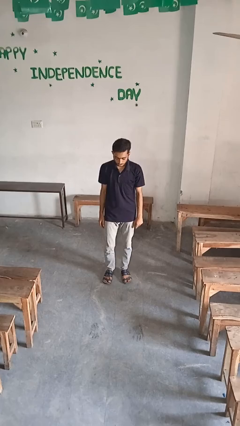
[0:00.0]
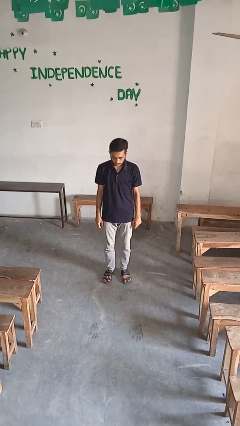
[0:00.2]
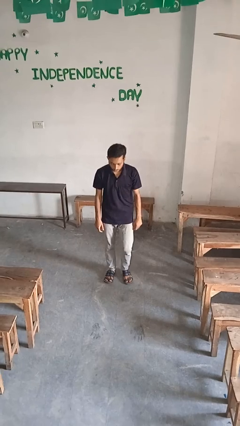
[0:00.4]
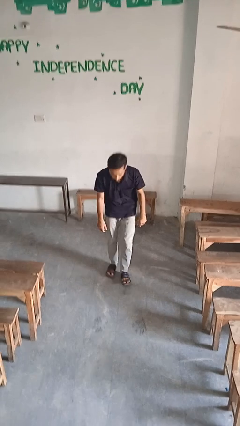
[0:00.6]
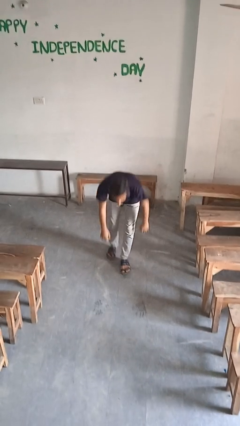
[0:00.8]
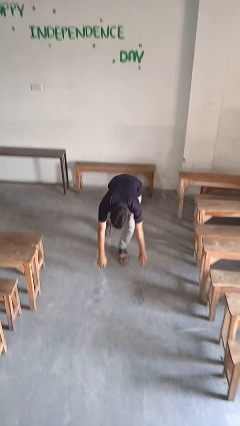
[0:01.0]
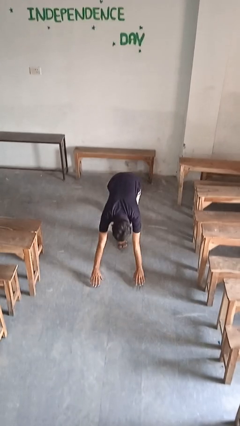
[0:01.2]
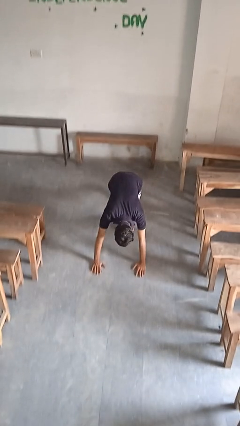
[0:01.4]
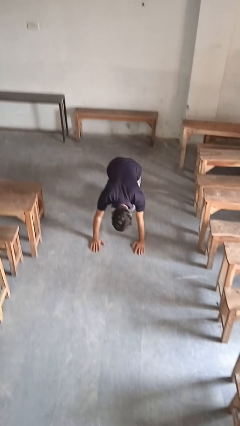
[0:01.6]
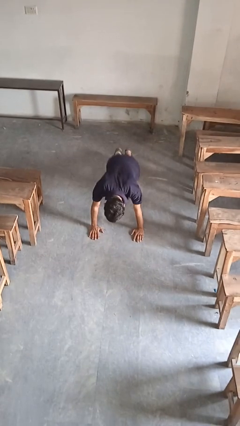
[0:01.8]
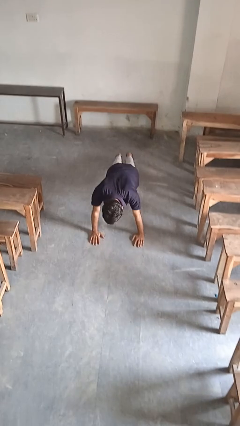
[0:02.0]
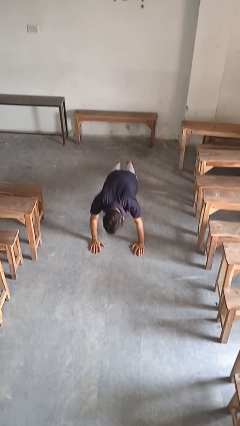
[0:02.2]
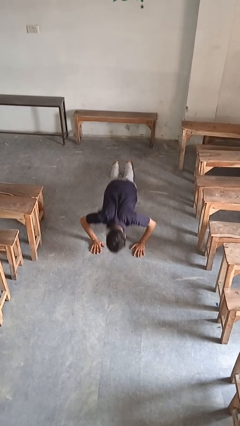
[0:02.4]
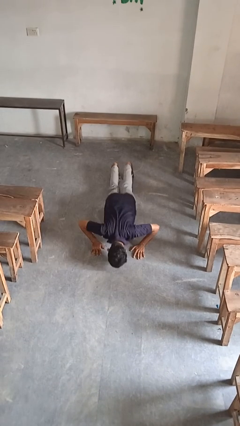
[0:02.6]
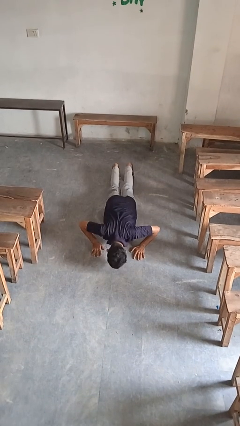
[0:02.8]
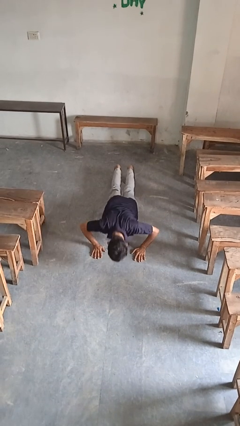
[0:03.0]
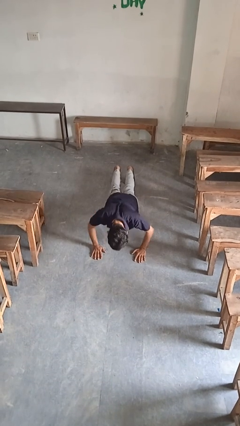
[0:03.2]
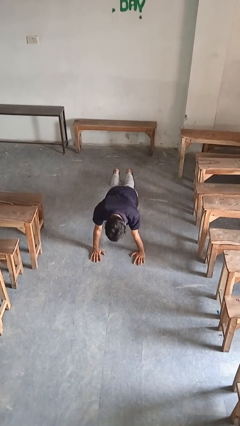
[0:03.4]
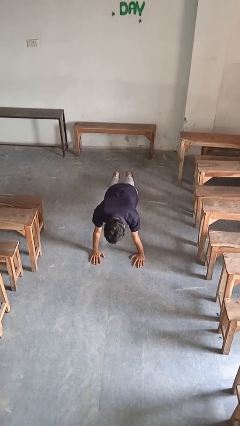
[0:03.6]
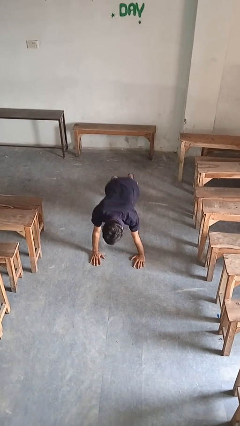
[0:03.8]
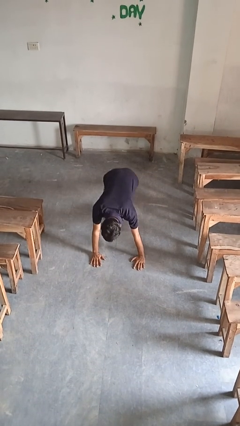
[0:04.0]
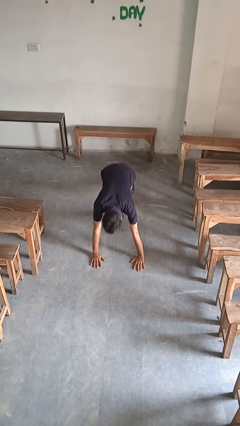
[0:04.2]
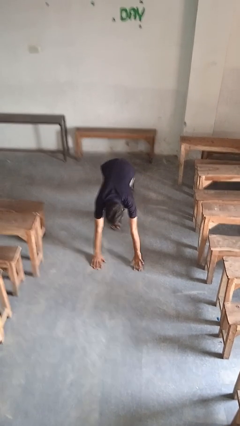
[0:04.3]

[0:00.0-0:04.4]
person exercises with pushup

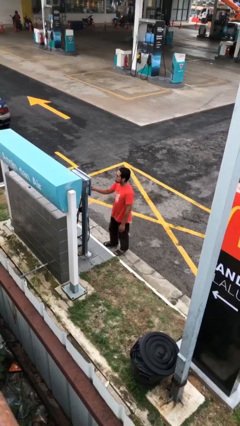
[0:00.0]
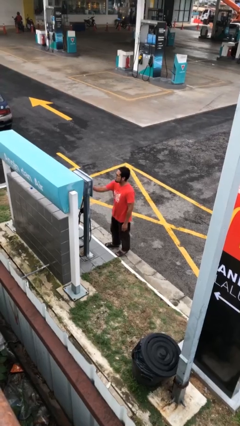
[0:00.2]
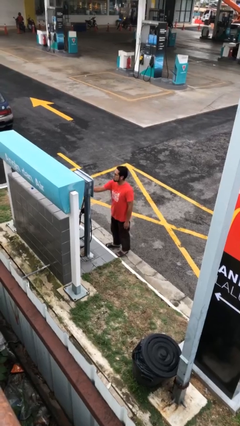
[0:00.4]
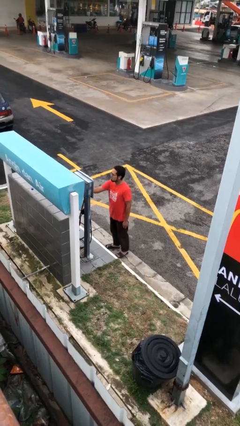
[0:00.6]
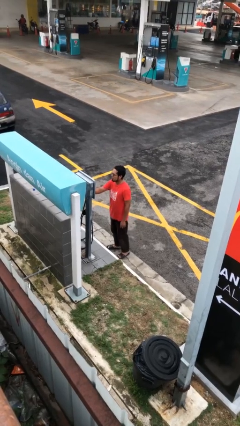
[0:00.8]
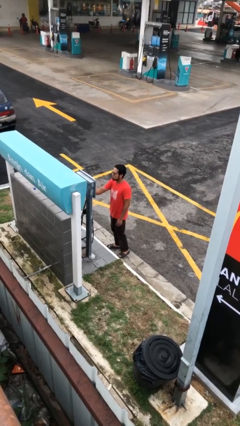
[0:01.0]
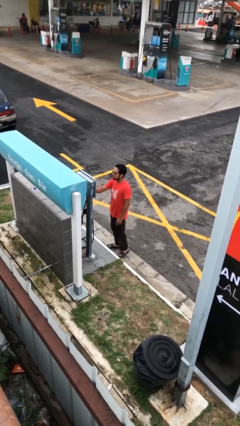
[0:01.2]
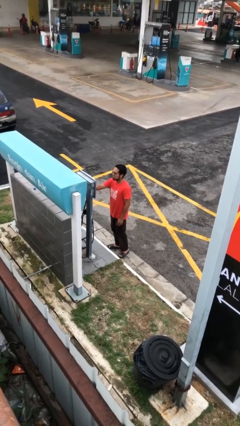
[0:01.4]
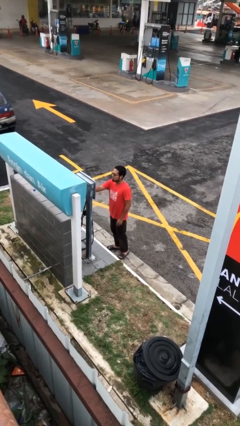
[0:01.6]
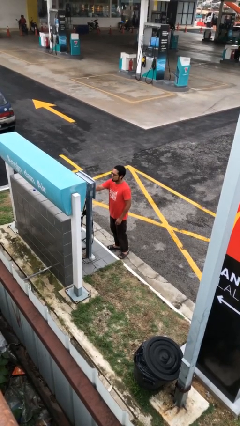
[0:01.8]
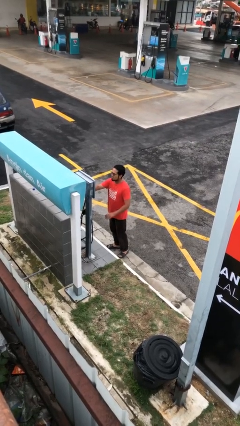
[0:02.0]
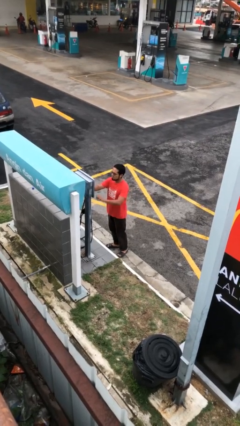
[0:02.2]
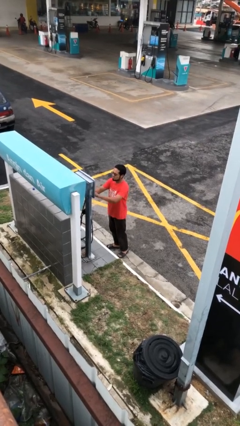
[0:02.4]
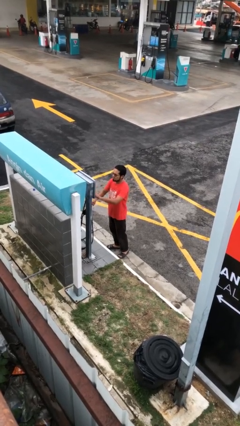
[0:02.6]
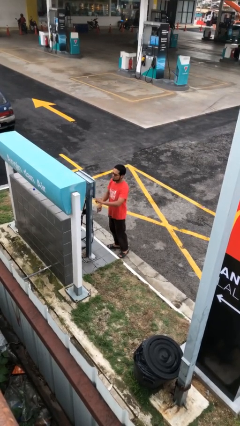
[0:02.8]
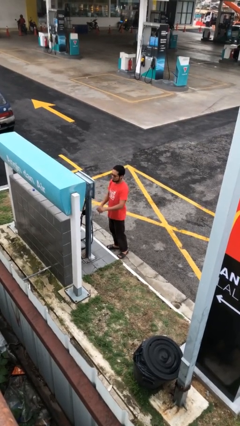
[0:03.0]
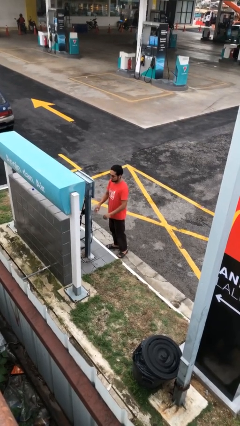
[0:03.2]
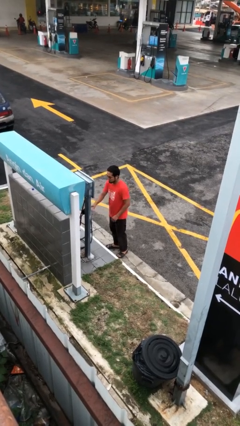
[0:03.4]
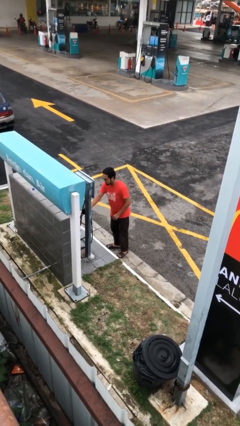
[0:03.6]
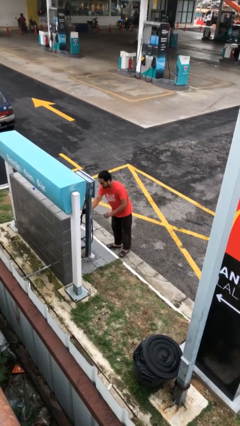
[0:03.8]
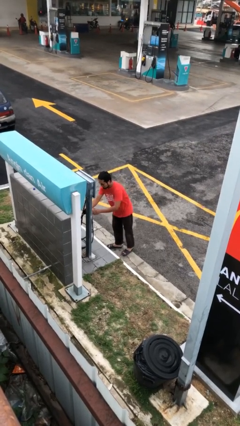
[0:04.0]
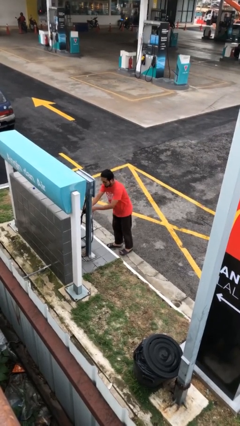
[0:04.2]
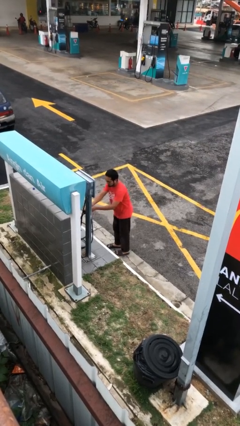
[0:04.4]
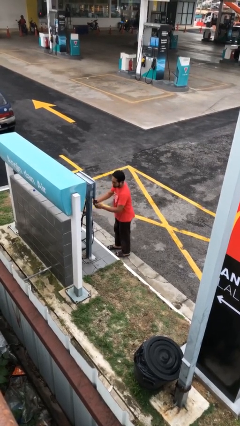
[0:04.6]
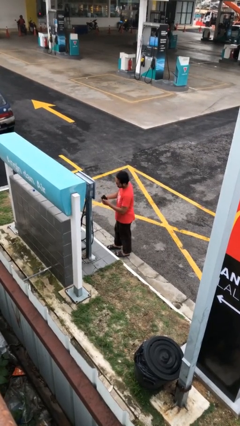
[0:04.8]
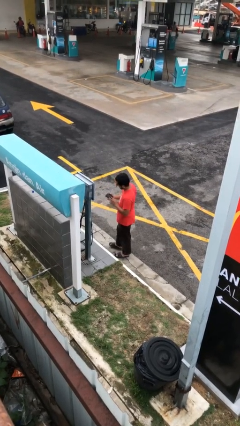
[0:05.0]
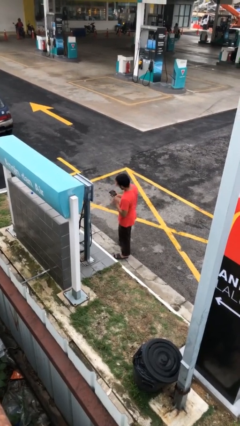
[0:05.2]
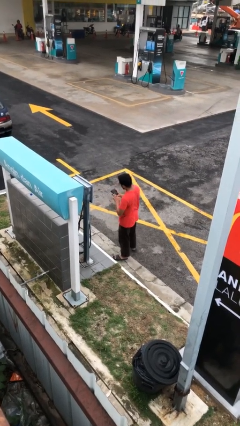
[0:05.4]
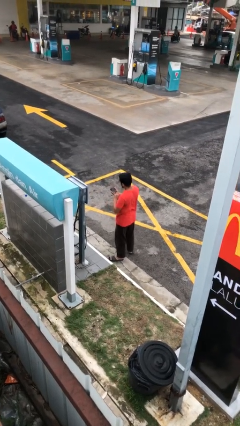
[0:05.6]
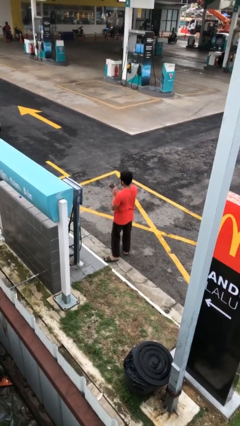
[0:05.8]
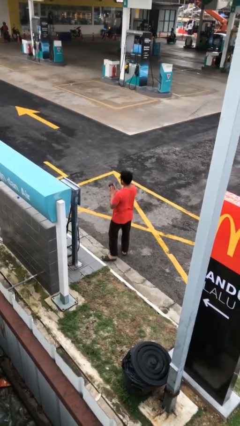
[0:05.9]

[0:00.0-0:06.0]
person purchases from machine

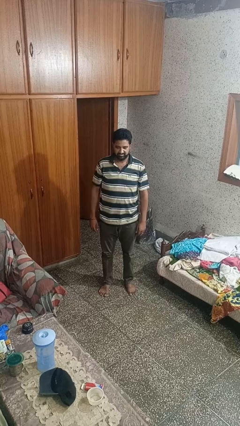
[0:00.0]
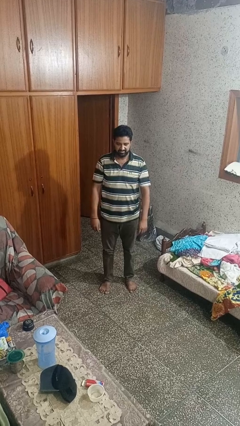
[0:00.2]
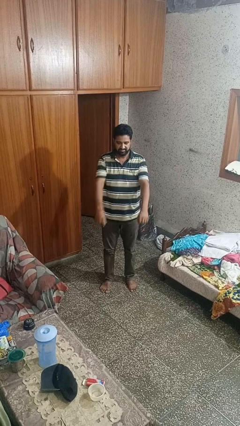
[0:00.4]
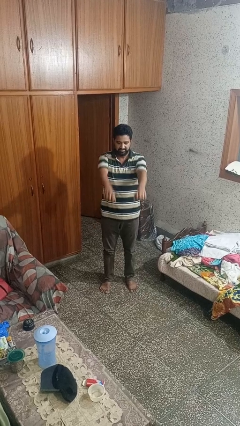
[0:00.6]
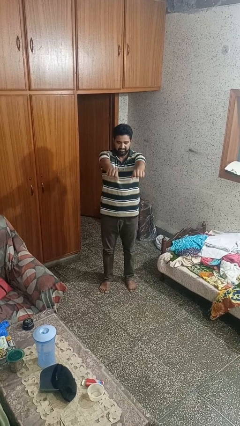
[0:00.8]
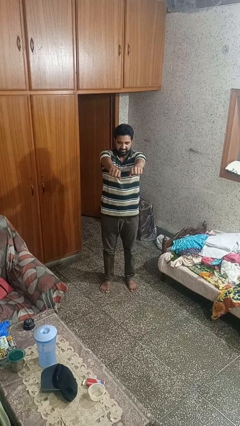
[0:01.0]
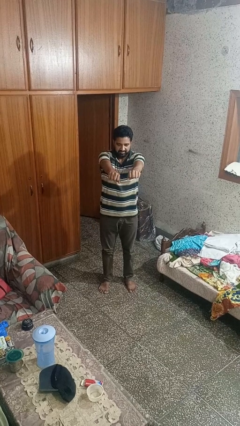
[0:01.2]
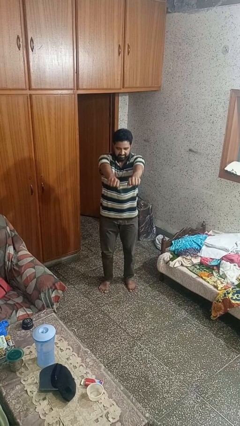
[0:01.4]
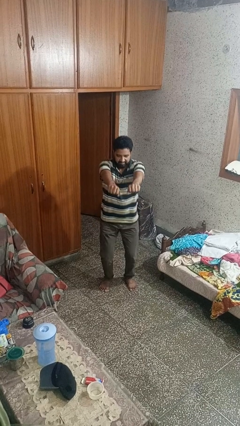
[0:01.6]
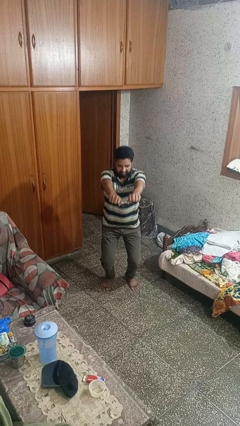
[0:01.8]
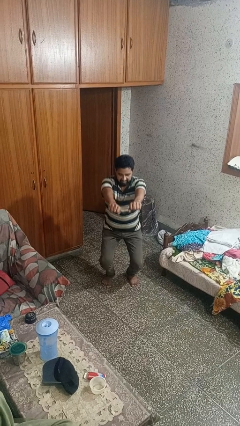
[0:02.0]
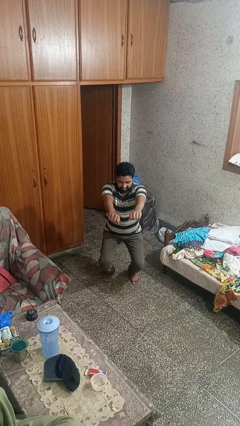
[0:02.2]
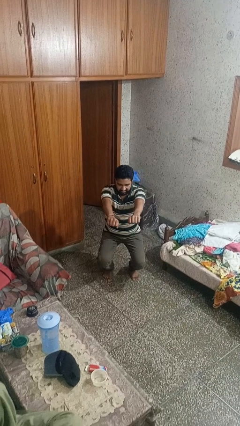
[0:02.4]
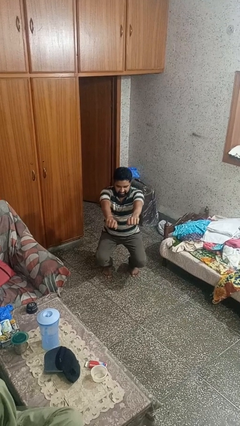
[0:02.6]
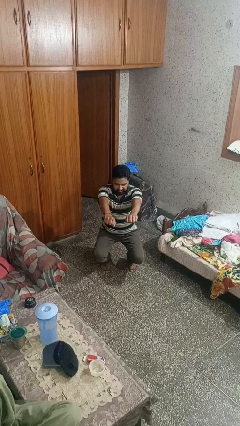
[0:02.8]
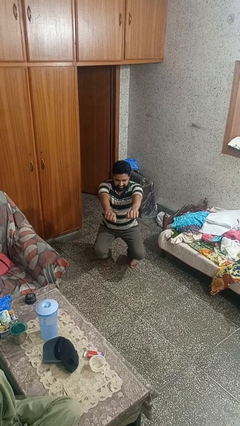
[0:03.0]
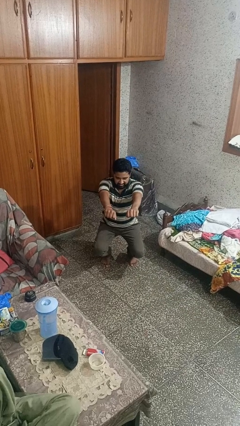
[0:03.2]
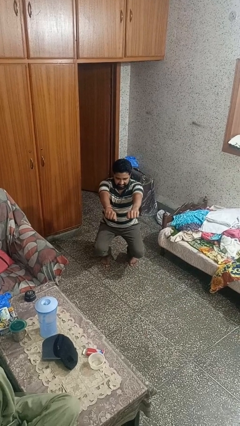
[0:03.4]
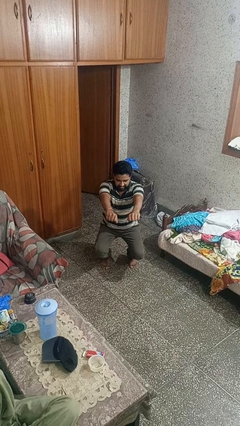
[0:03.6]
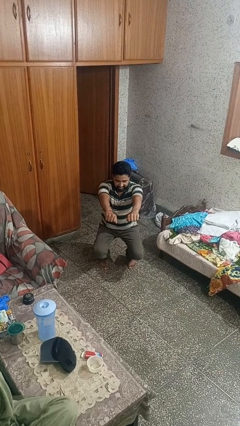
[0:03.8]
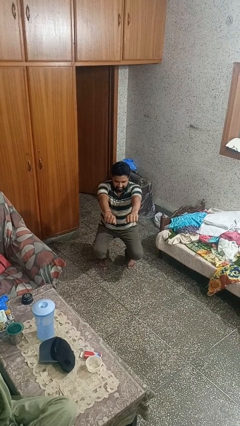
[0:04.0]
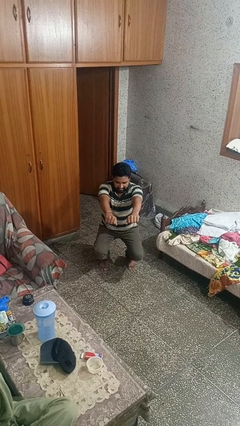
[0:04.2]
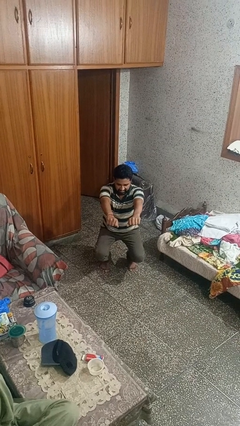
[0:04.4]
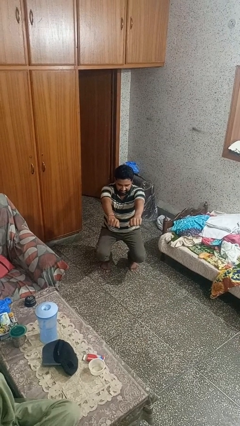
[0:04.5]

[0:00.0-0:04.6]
person squats

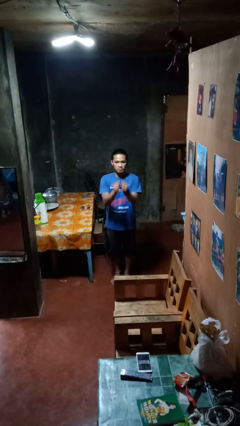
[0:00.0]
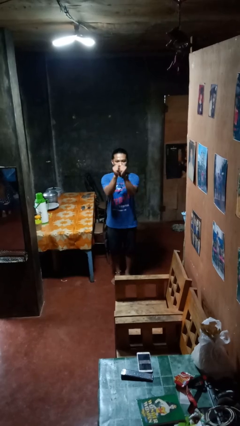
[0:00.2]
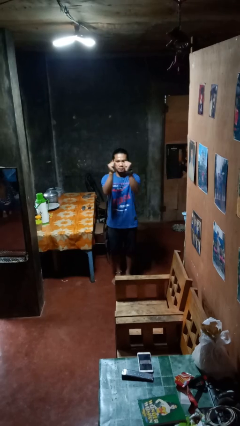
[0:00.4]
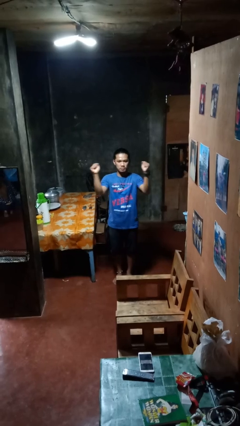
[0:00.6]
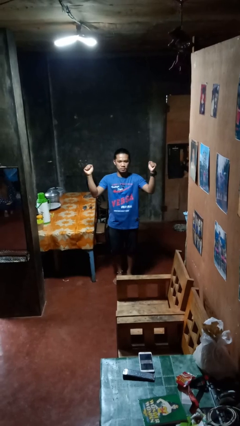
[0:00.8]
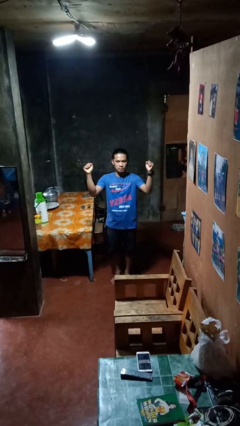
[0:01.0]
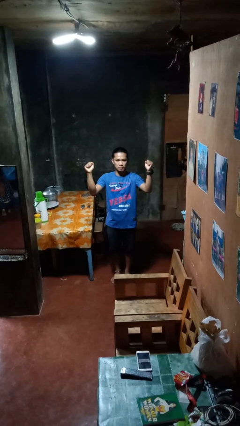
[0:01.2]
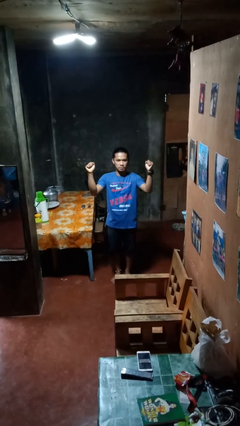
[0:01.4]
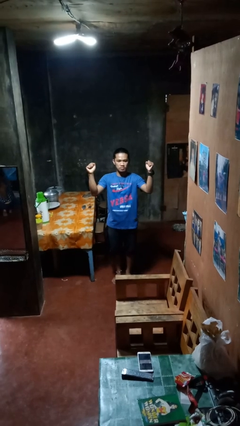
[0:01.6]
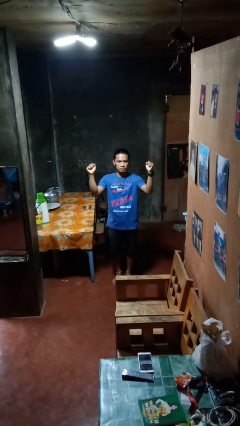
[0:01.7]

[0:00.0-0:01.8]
person gestures zoom in

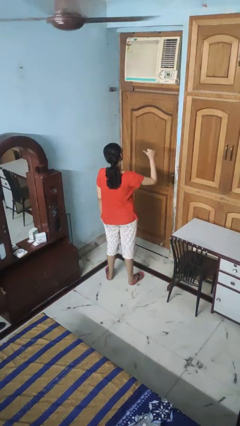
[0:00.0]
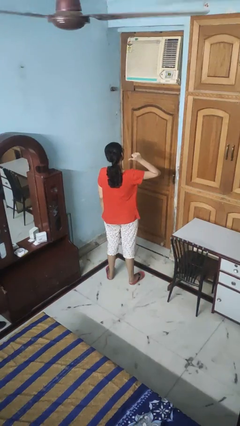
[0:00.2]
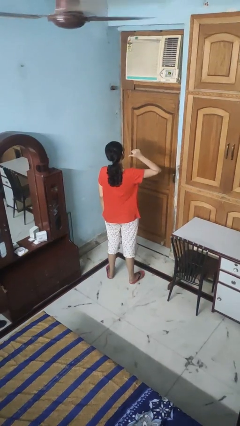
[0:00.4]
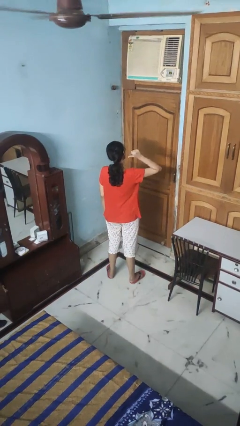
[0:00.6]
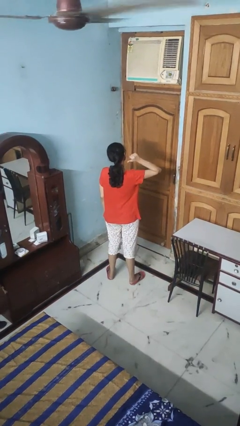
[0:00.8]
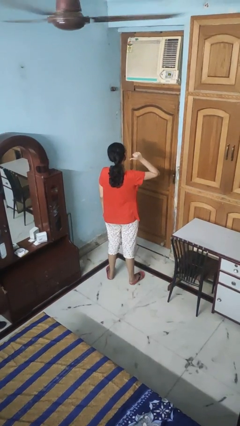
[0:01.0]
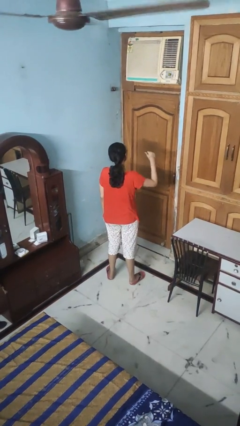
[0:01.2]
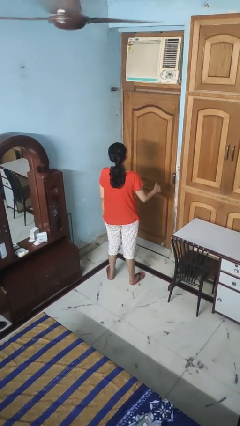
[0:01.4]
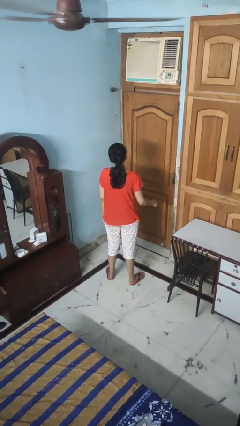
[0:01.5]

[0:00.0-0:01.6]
person gestures behind me
